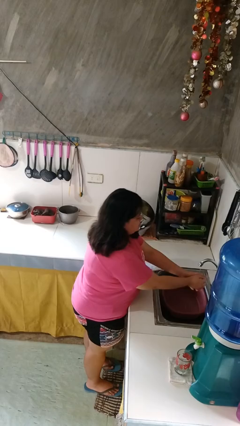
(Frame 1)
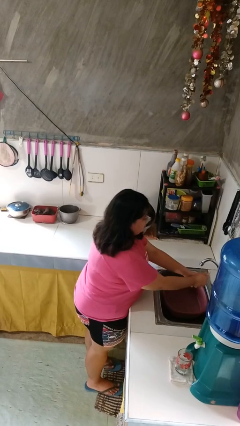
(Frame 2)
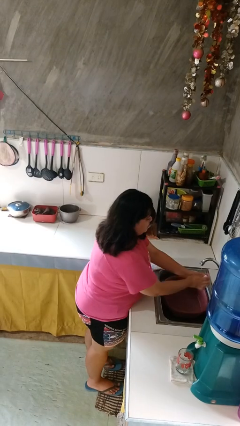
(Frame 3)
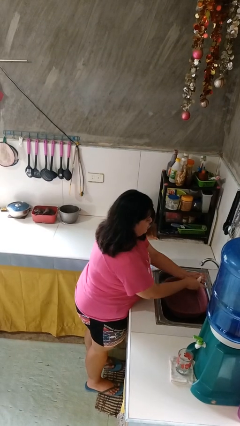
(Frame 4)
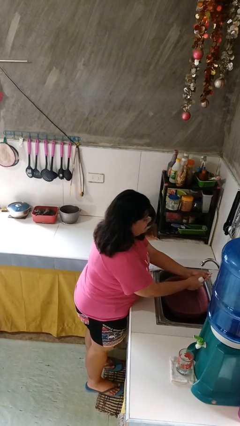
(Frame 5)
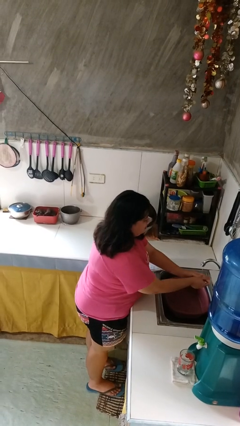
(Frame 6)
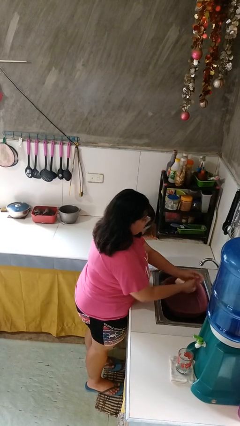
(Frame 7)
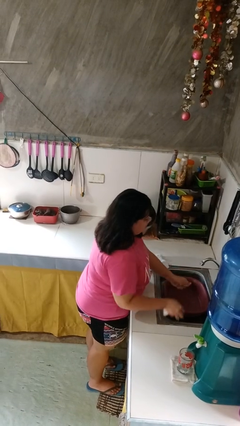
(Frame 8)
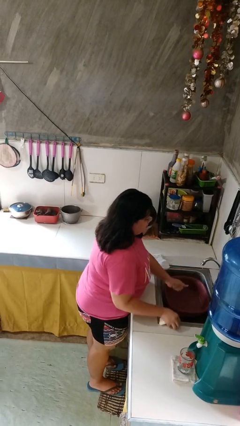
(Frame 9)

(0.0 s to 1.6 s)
person washes hands

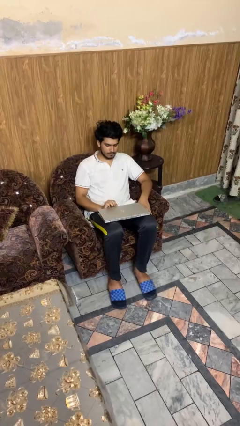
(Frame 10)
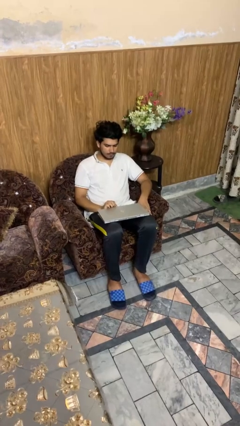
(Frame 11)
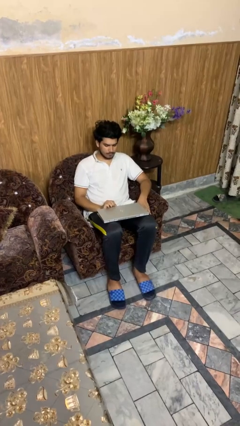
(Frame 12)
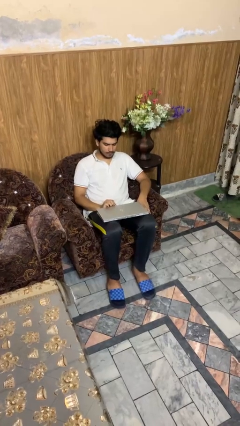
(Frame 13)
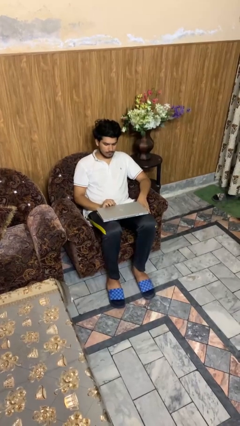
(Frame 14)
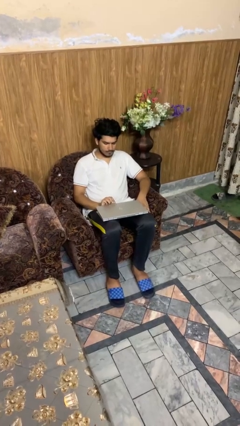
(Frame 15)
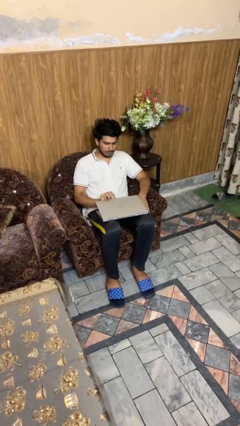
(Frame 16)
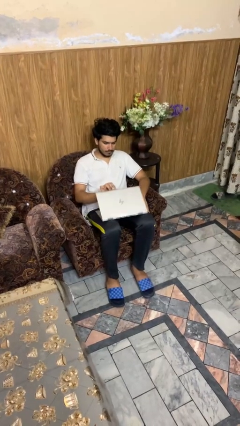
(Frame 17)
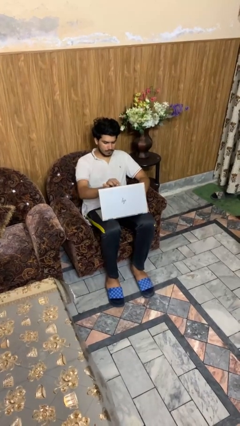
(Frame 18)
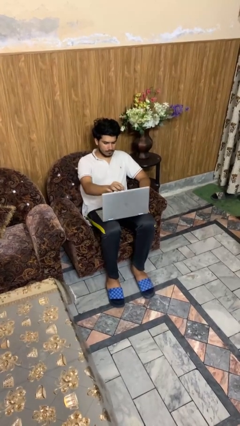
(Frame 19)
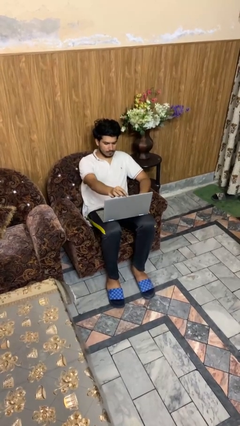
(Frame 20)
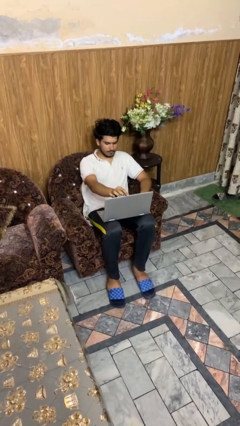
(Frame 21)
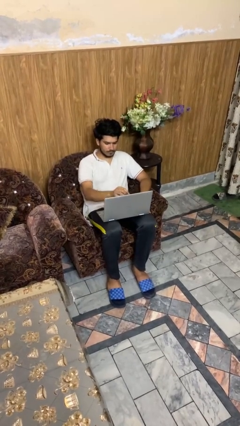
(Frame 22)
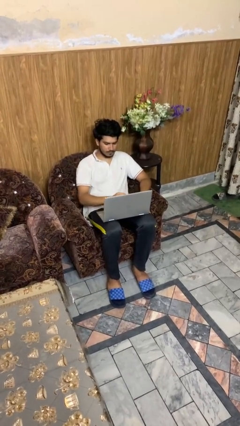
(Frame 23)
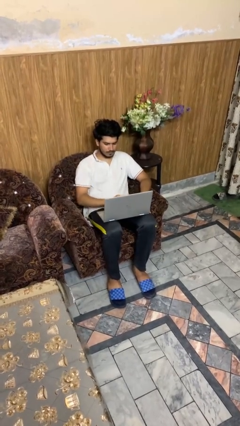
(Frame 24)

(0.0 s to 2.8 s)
person opens laptop

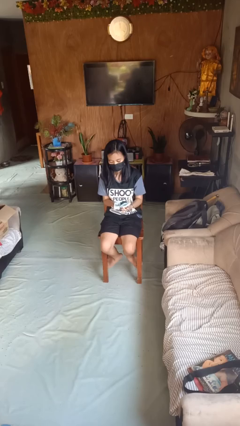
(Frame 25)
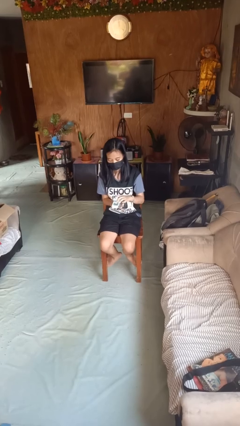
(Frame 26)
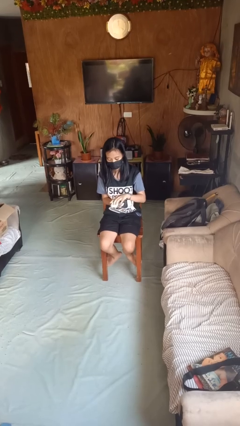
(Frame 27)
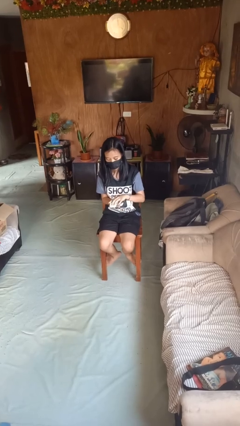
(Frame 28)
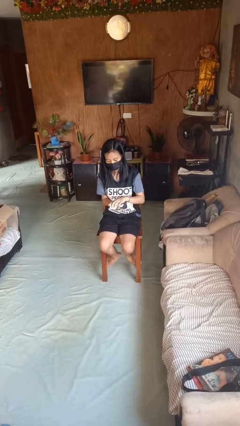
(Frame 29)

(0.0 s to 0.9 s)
person closes jewelry box

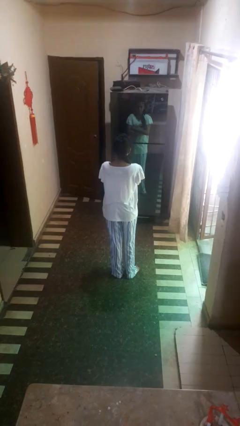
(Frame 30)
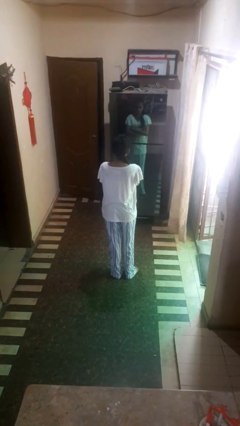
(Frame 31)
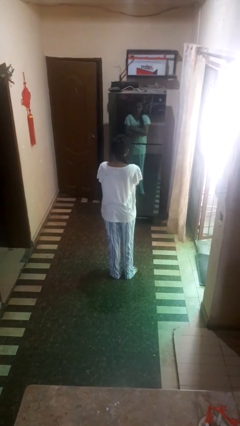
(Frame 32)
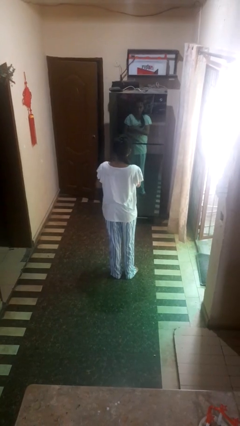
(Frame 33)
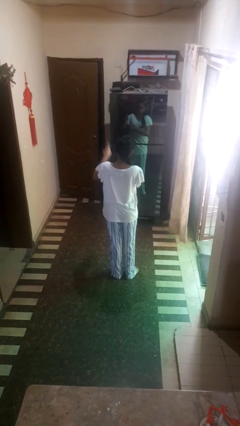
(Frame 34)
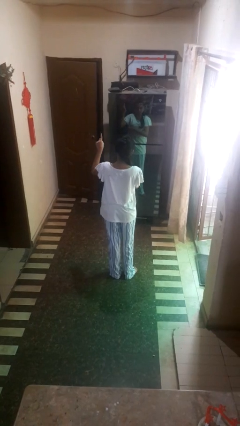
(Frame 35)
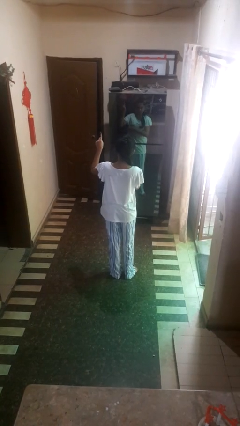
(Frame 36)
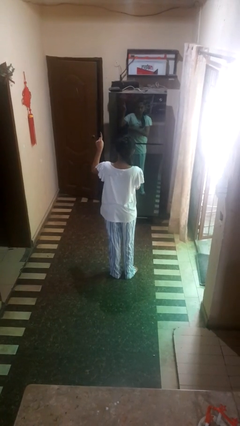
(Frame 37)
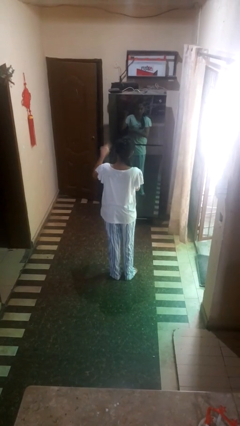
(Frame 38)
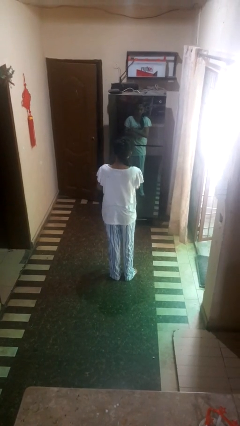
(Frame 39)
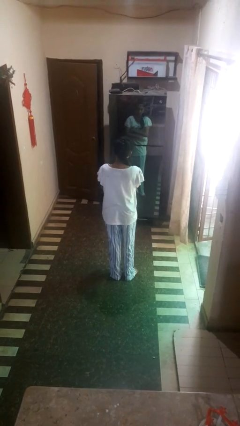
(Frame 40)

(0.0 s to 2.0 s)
person gestures number one

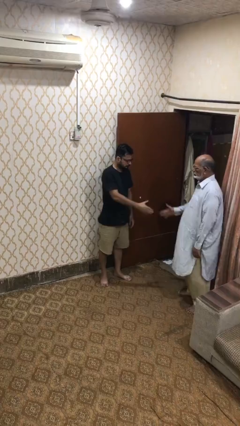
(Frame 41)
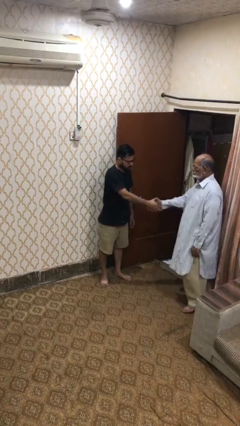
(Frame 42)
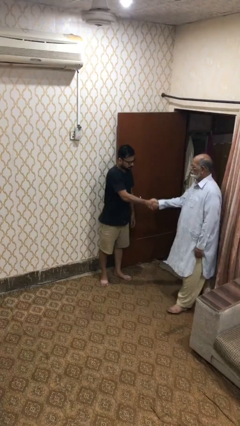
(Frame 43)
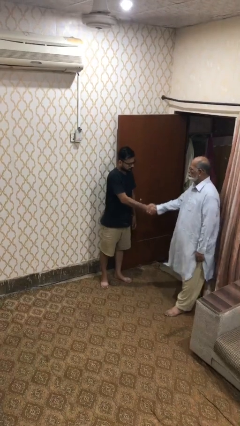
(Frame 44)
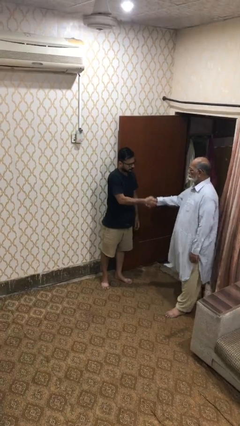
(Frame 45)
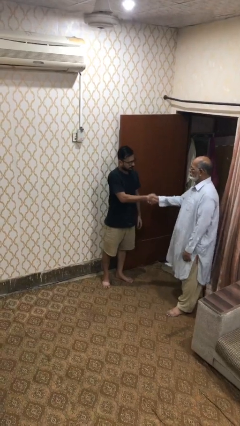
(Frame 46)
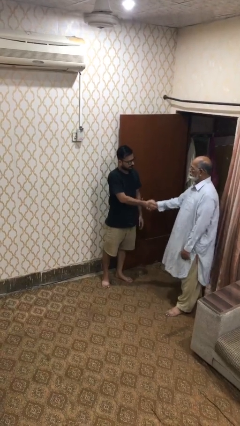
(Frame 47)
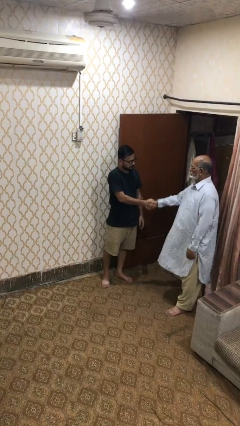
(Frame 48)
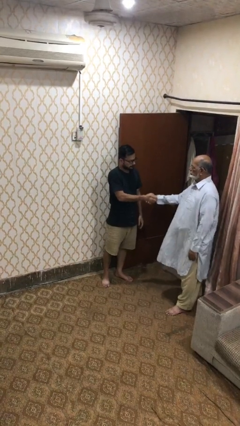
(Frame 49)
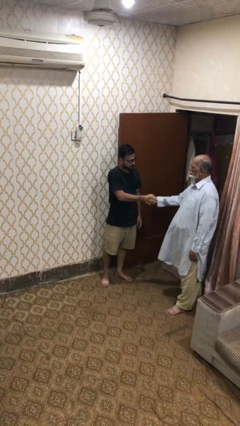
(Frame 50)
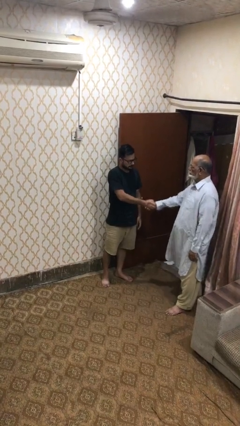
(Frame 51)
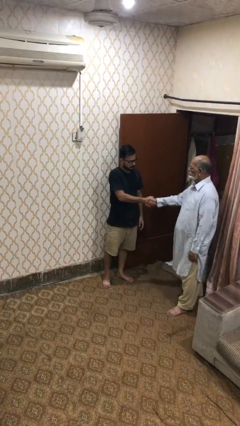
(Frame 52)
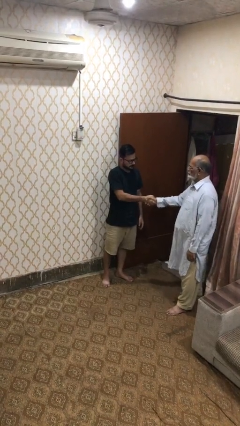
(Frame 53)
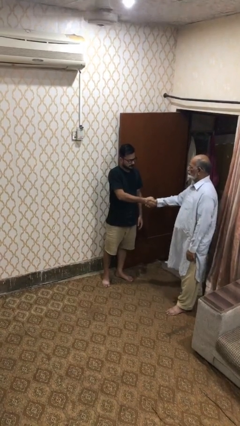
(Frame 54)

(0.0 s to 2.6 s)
person shakes hand

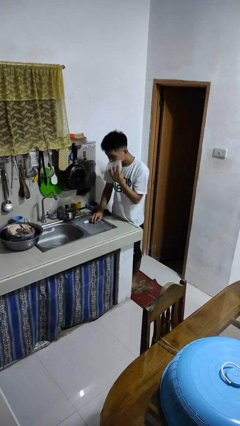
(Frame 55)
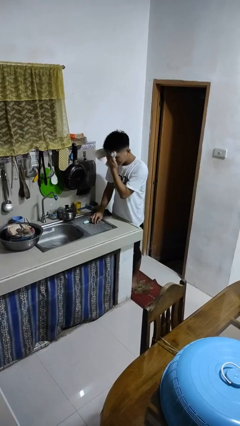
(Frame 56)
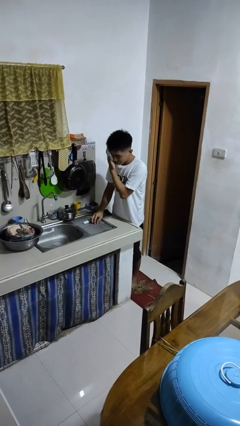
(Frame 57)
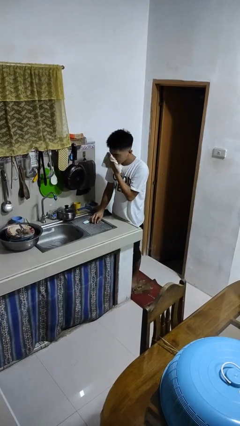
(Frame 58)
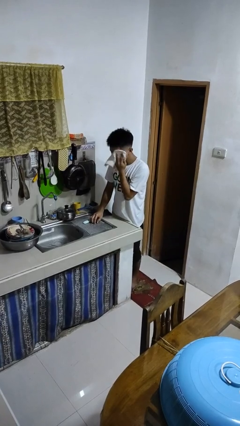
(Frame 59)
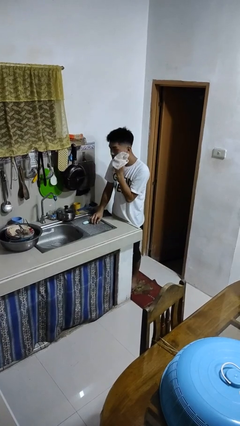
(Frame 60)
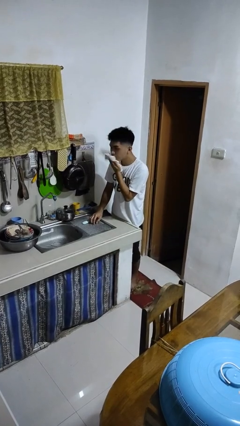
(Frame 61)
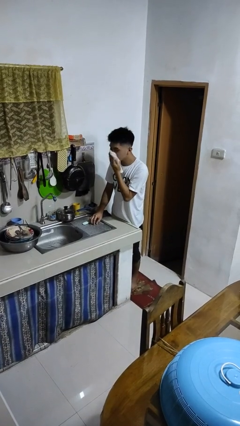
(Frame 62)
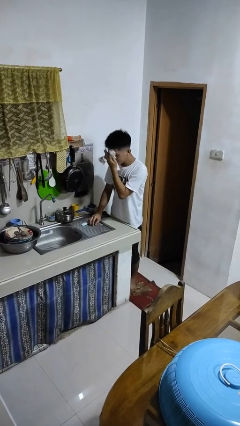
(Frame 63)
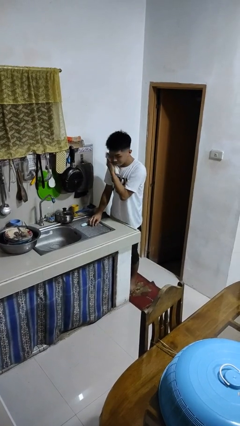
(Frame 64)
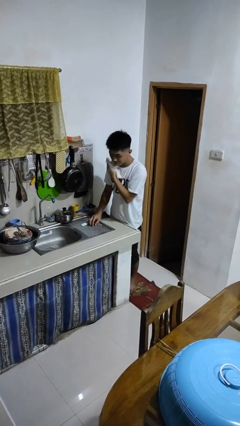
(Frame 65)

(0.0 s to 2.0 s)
person dries face with towel

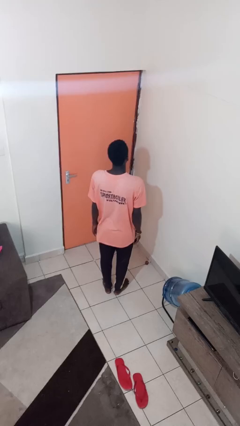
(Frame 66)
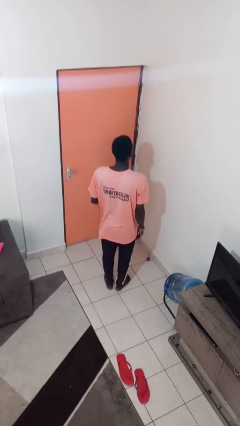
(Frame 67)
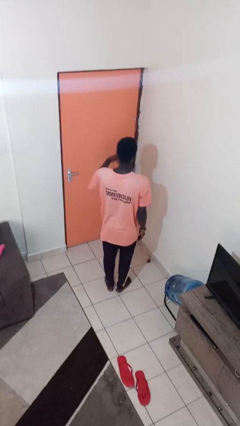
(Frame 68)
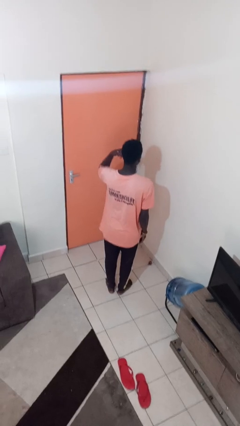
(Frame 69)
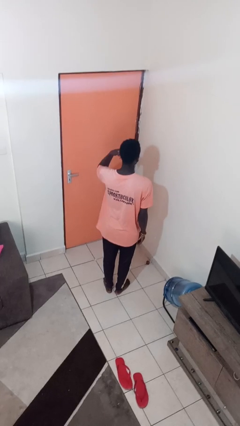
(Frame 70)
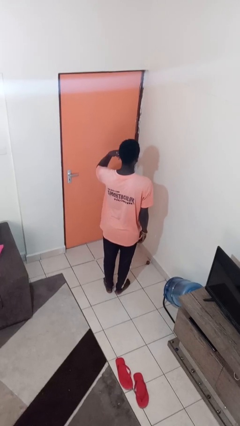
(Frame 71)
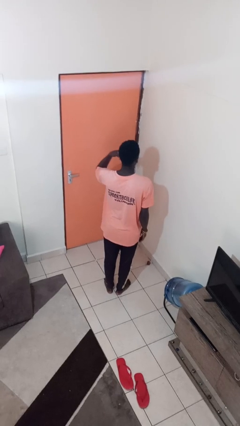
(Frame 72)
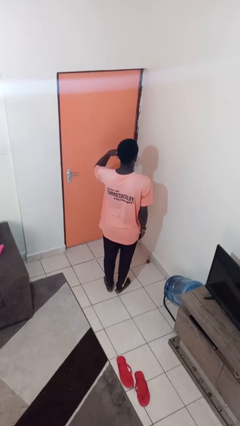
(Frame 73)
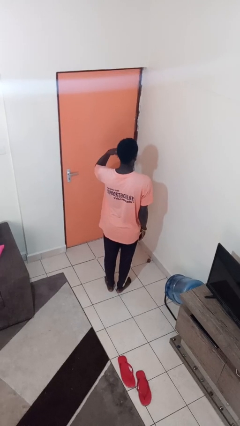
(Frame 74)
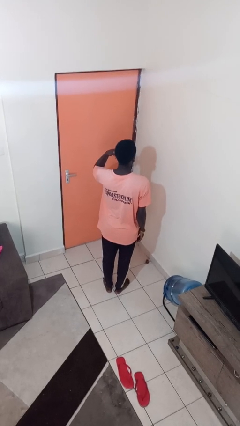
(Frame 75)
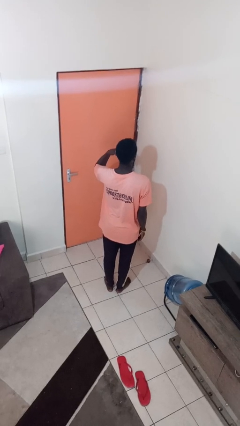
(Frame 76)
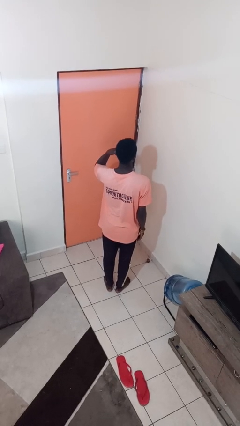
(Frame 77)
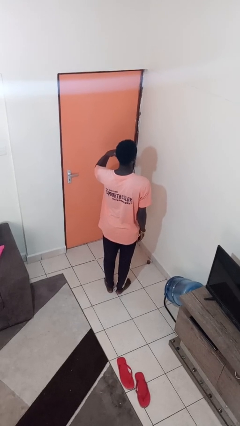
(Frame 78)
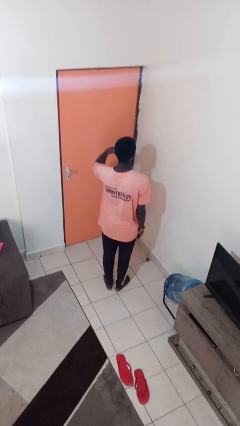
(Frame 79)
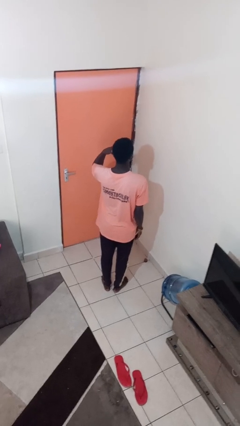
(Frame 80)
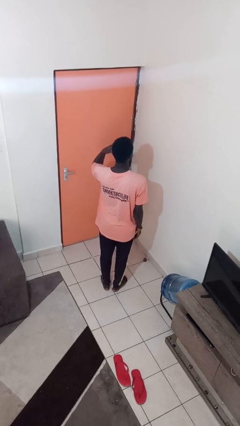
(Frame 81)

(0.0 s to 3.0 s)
person gestures call me

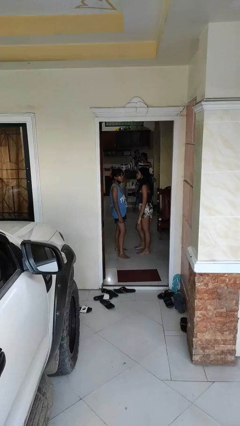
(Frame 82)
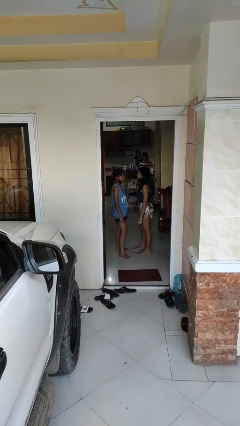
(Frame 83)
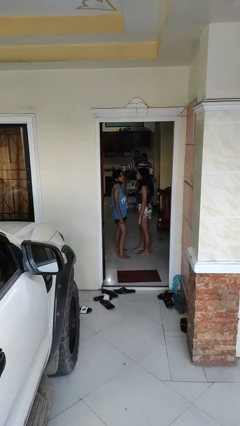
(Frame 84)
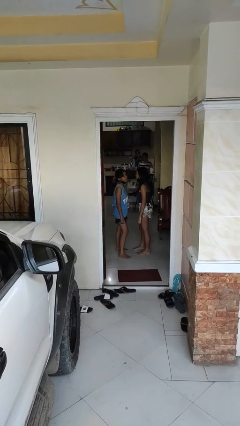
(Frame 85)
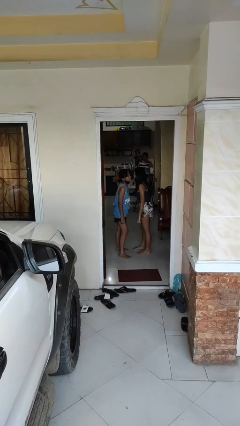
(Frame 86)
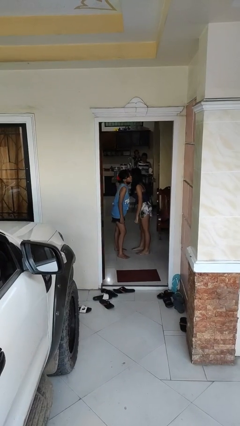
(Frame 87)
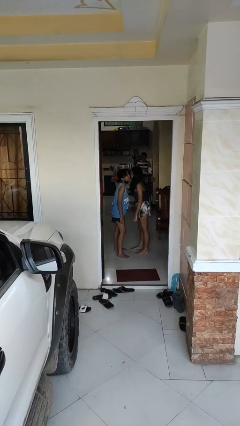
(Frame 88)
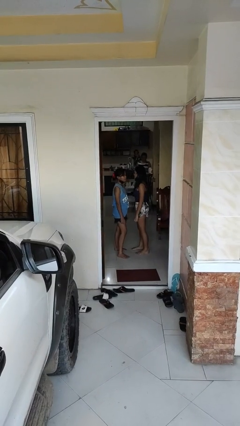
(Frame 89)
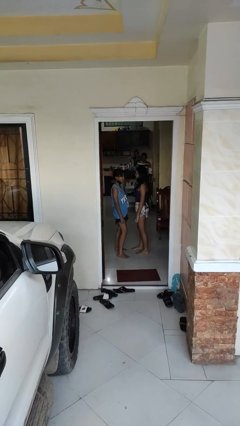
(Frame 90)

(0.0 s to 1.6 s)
person kisses cheek of person
